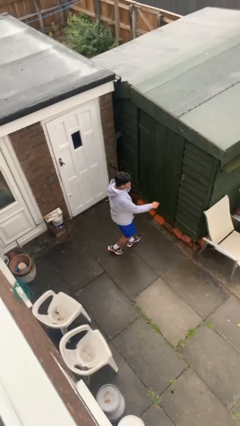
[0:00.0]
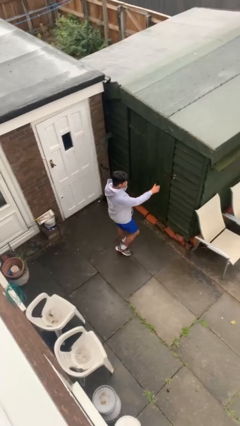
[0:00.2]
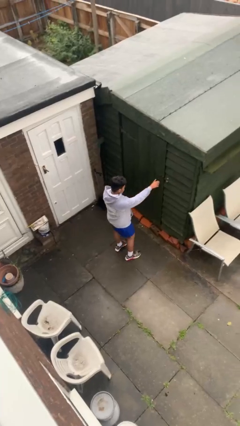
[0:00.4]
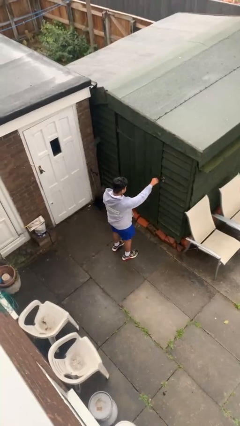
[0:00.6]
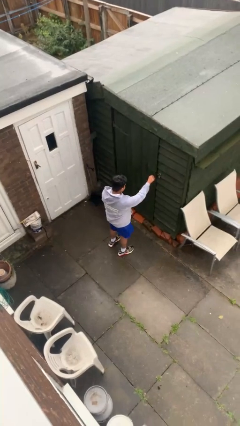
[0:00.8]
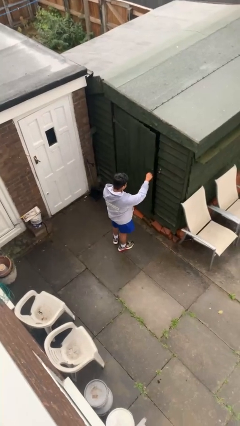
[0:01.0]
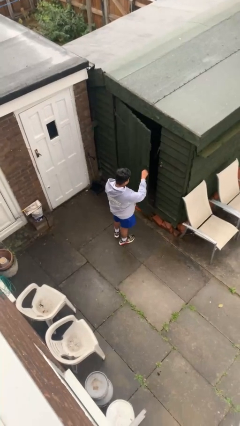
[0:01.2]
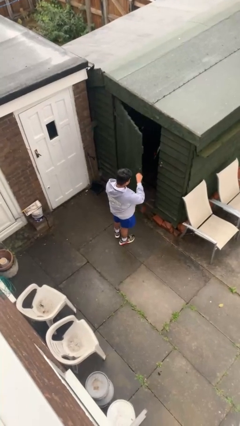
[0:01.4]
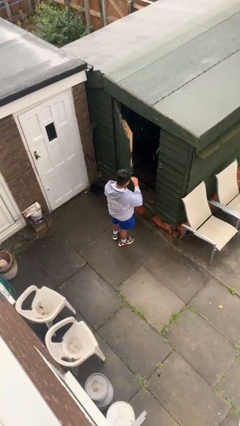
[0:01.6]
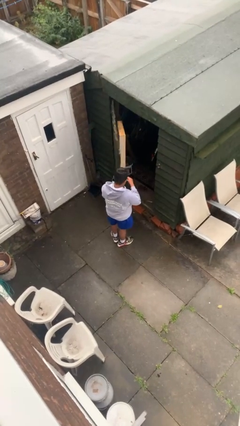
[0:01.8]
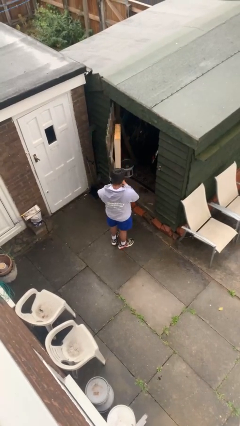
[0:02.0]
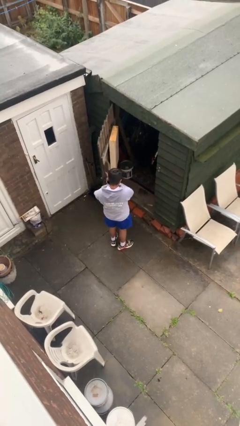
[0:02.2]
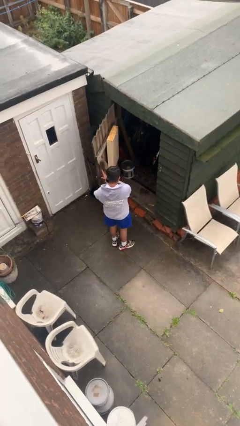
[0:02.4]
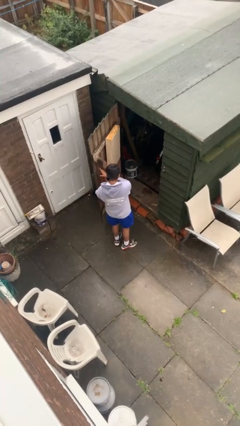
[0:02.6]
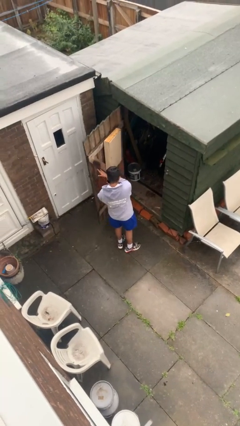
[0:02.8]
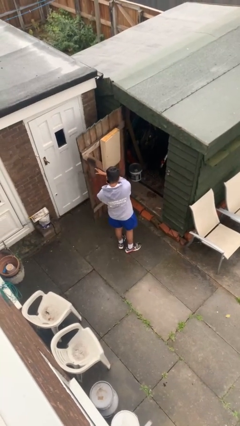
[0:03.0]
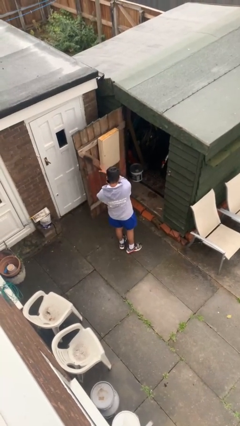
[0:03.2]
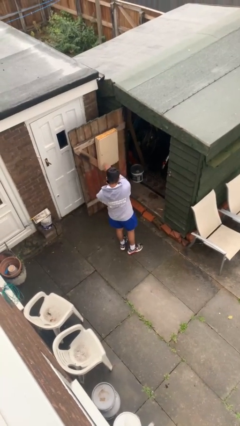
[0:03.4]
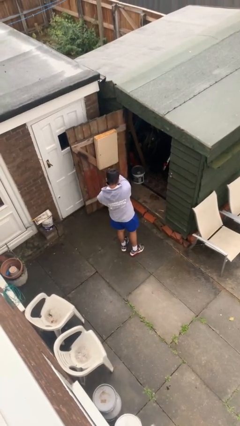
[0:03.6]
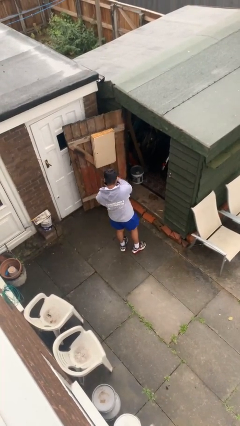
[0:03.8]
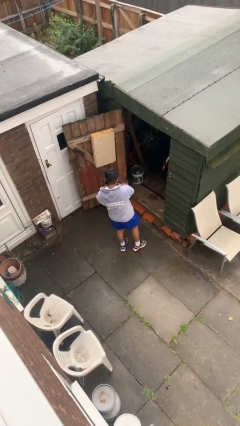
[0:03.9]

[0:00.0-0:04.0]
person opens facility door

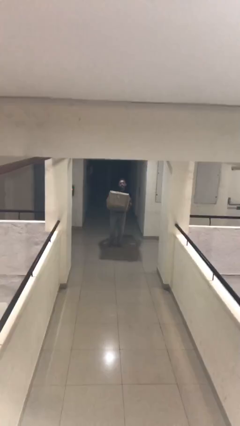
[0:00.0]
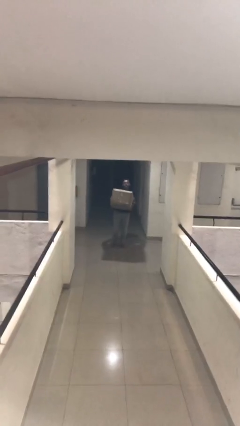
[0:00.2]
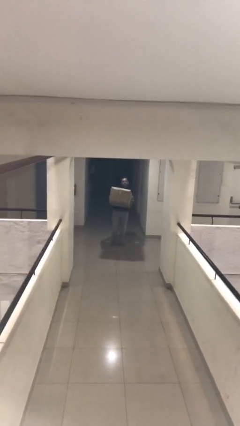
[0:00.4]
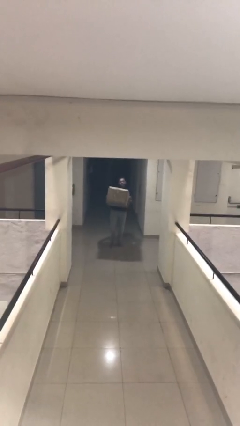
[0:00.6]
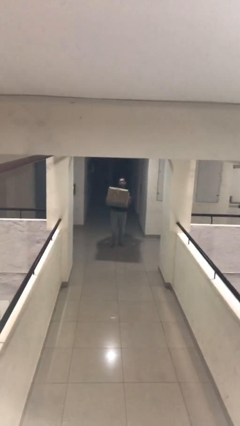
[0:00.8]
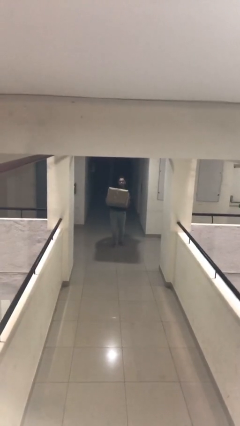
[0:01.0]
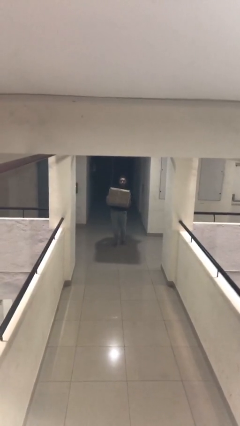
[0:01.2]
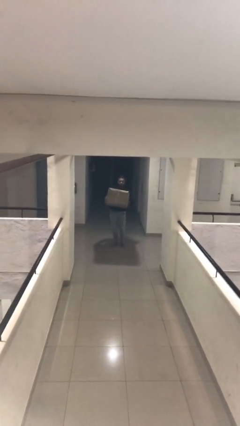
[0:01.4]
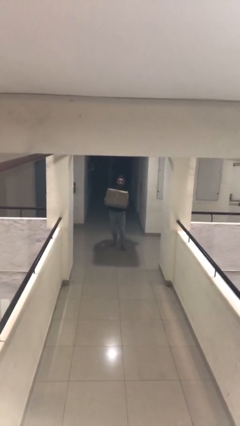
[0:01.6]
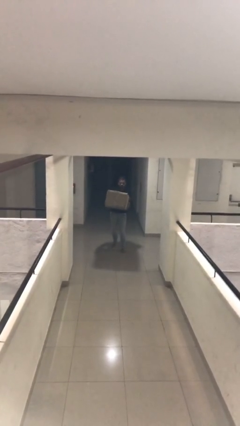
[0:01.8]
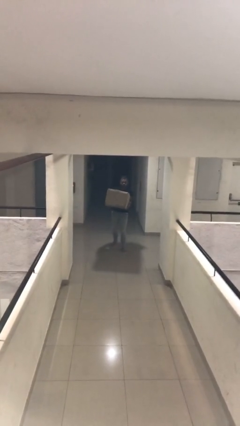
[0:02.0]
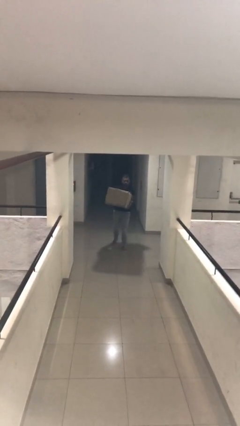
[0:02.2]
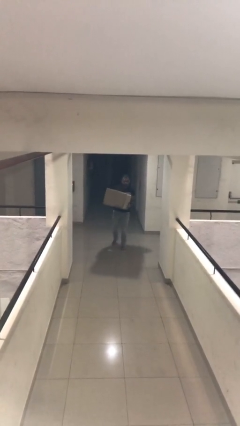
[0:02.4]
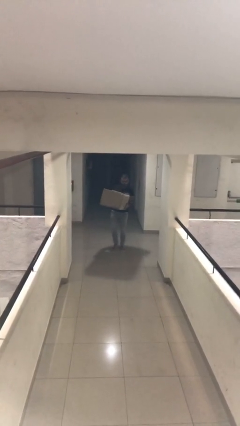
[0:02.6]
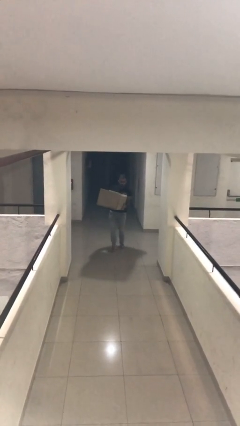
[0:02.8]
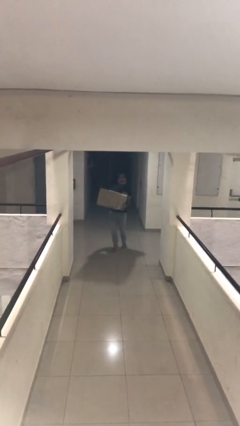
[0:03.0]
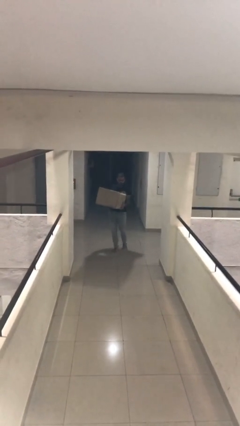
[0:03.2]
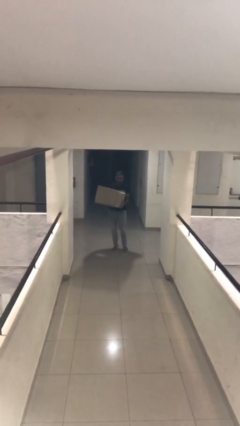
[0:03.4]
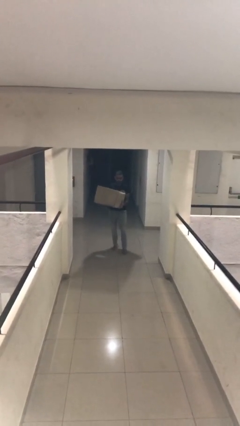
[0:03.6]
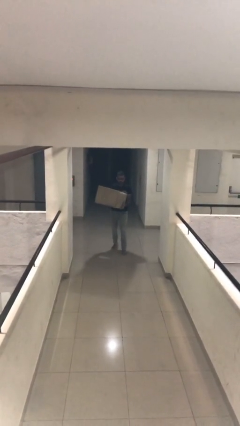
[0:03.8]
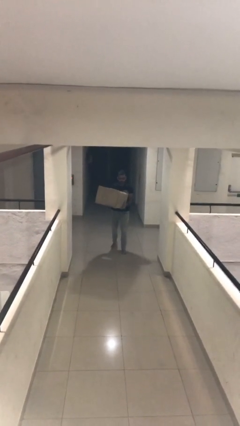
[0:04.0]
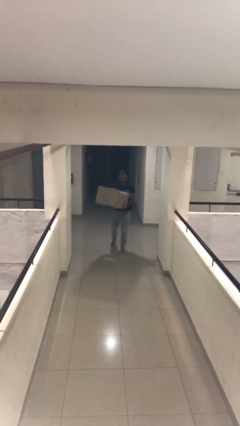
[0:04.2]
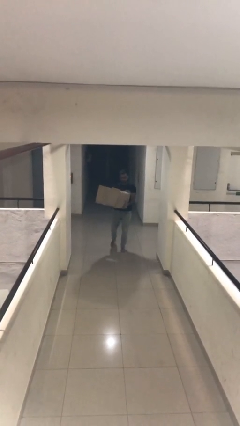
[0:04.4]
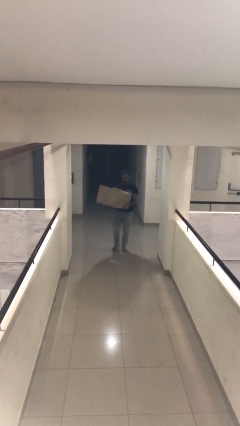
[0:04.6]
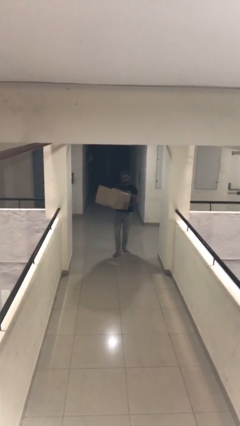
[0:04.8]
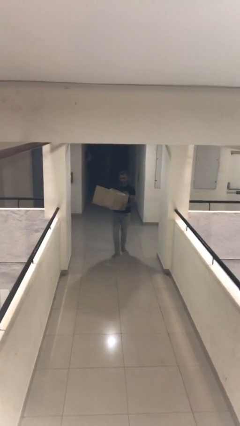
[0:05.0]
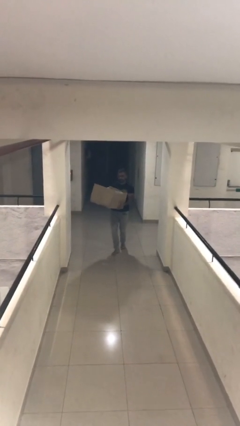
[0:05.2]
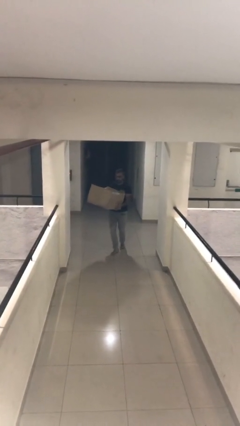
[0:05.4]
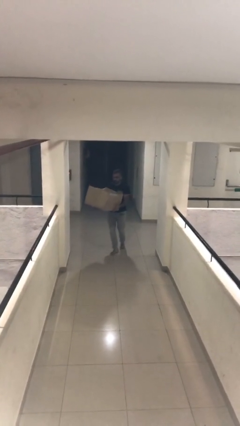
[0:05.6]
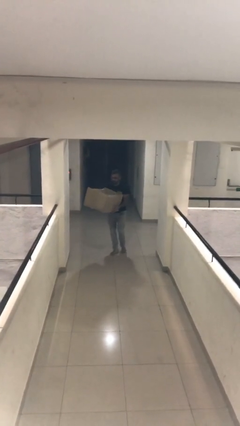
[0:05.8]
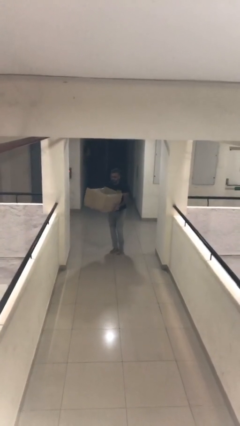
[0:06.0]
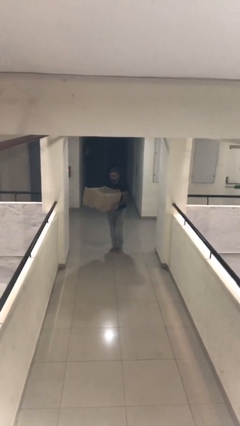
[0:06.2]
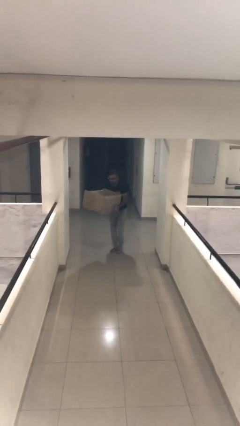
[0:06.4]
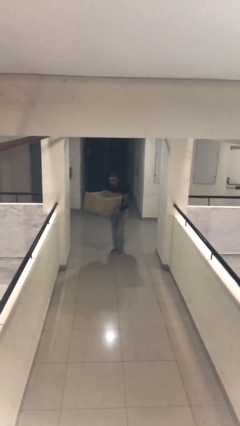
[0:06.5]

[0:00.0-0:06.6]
person carries heavy object

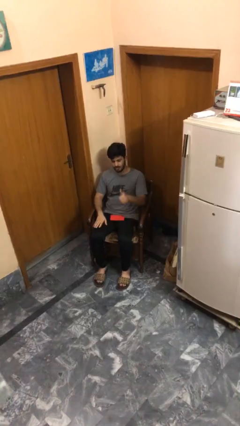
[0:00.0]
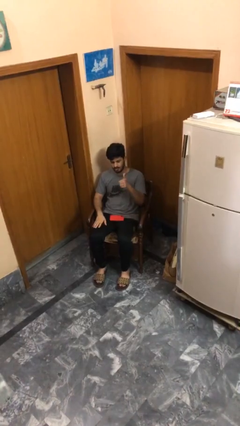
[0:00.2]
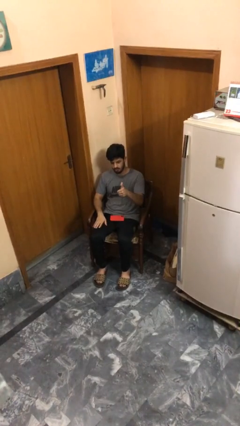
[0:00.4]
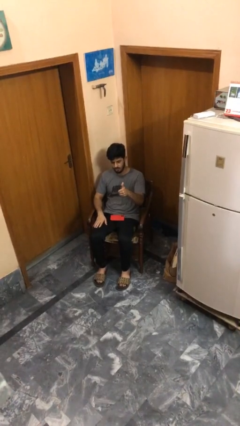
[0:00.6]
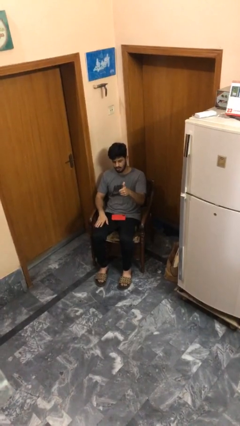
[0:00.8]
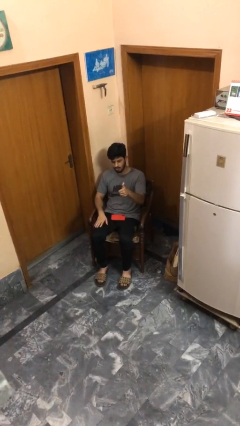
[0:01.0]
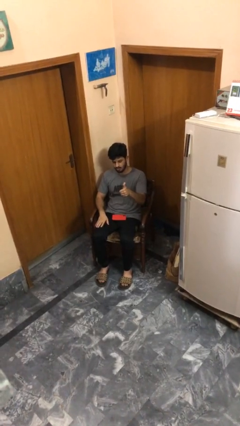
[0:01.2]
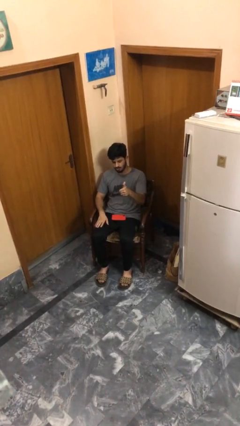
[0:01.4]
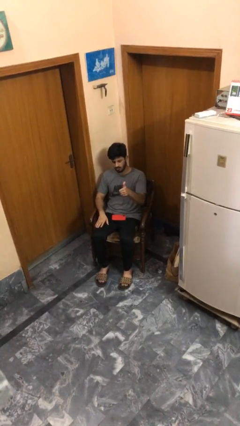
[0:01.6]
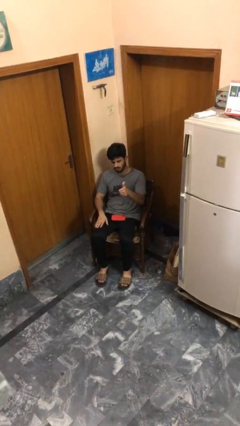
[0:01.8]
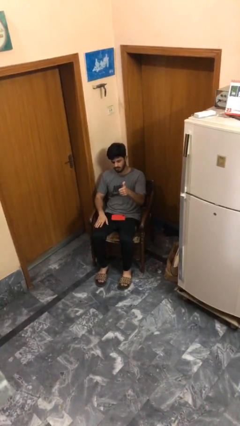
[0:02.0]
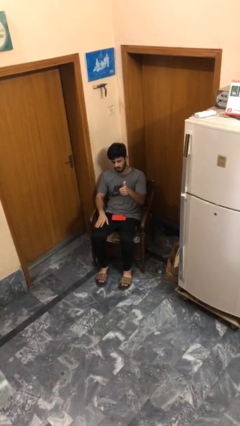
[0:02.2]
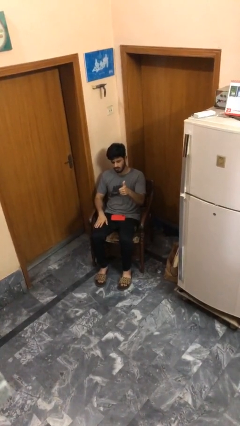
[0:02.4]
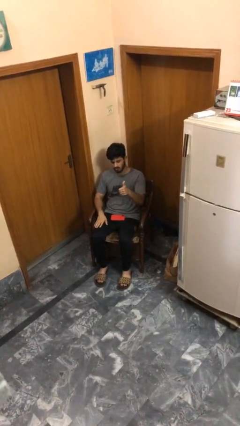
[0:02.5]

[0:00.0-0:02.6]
person gestures thumbs up

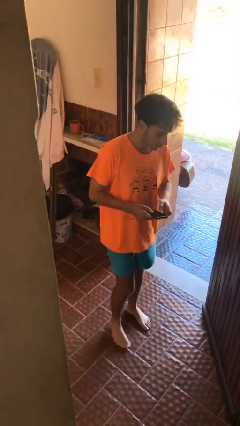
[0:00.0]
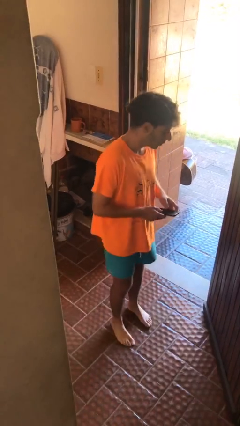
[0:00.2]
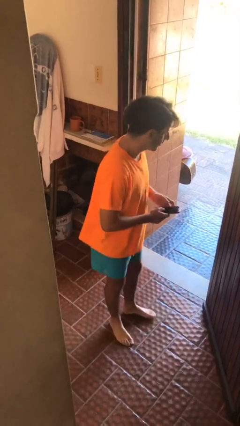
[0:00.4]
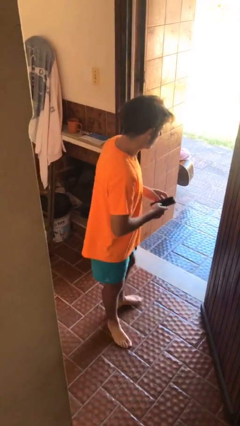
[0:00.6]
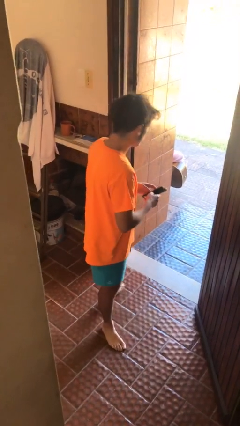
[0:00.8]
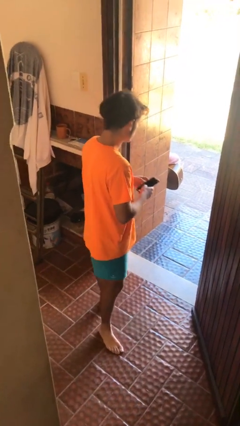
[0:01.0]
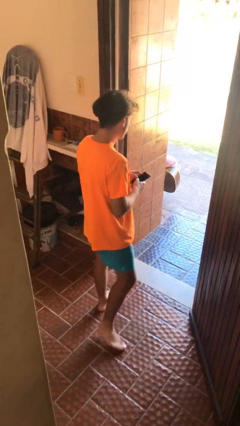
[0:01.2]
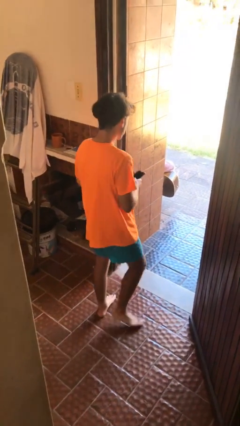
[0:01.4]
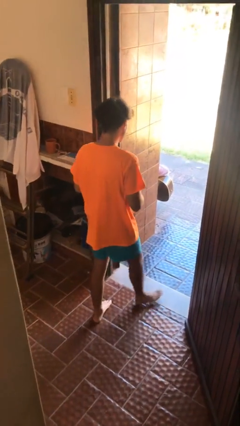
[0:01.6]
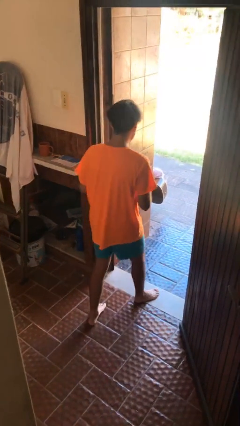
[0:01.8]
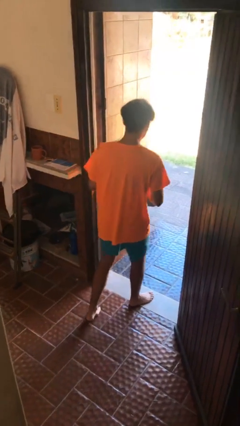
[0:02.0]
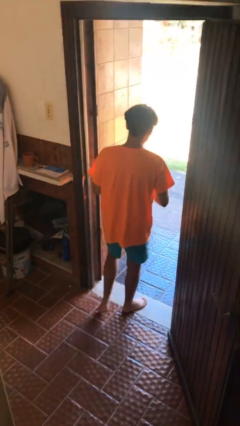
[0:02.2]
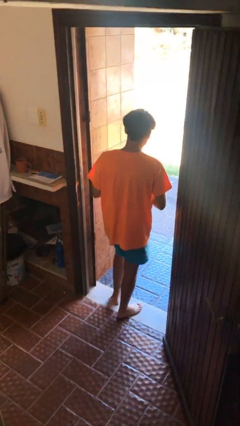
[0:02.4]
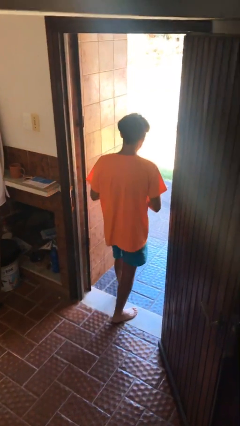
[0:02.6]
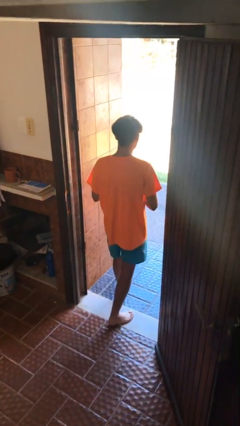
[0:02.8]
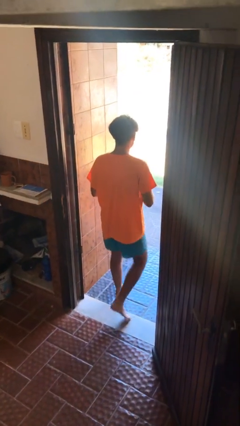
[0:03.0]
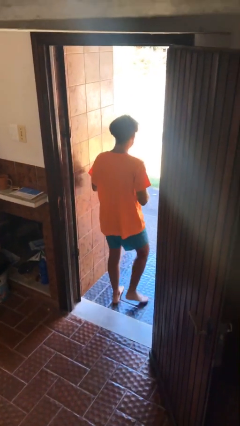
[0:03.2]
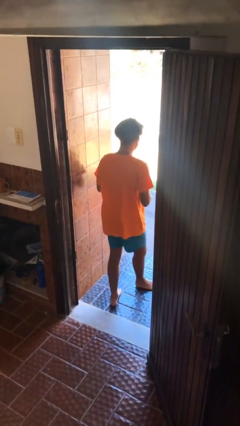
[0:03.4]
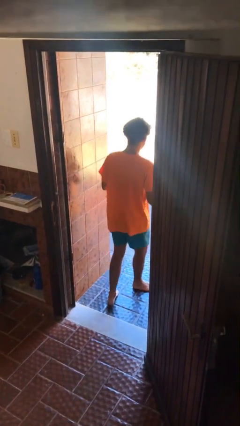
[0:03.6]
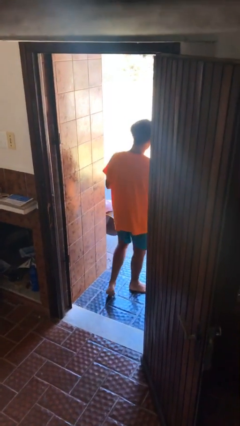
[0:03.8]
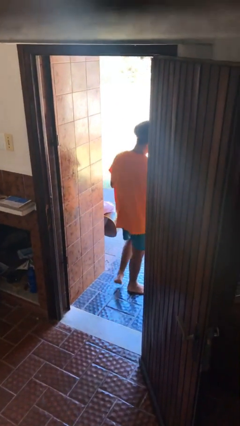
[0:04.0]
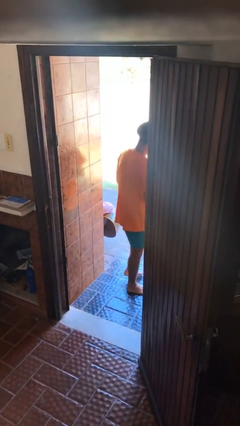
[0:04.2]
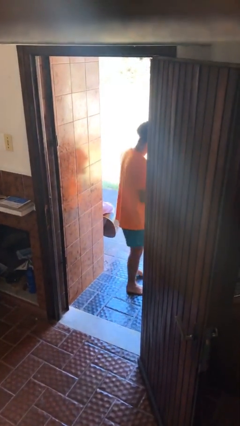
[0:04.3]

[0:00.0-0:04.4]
person exits scene through structure
